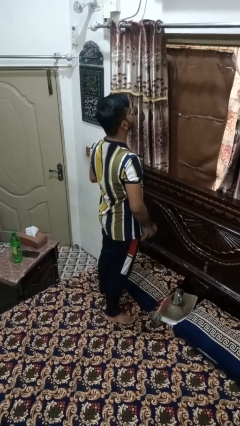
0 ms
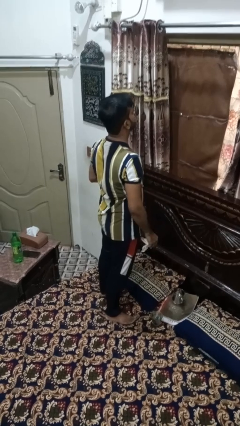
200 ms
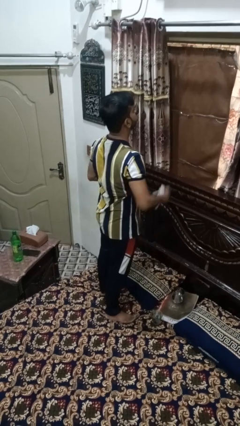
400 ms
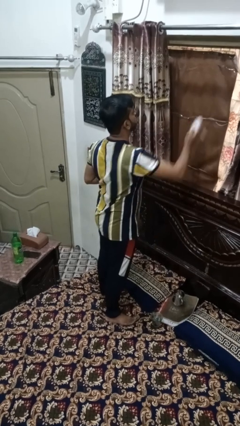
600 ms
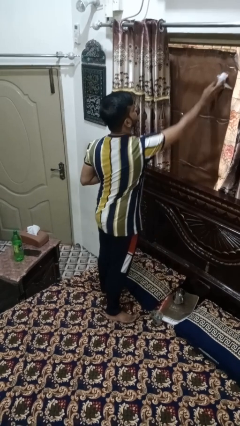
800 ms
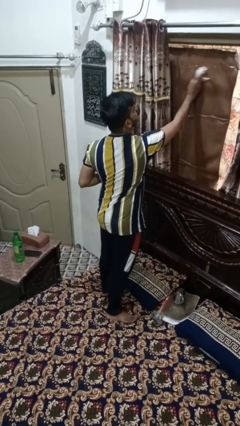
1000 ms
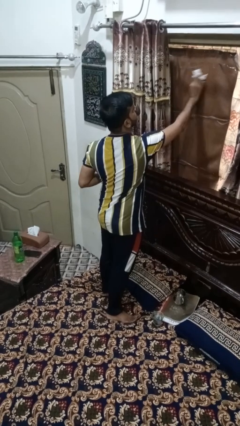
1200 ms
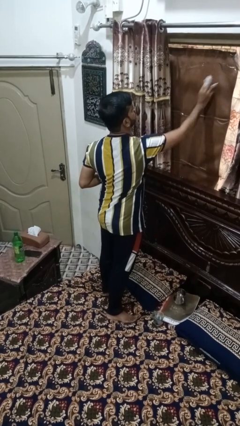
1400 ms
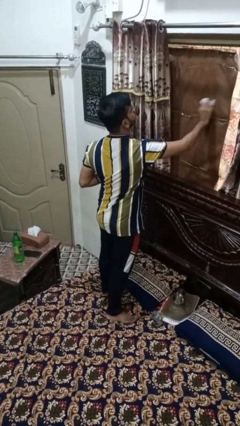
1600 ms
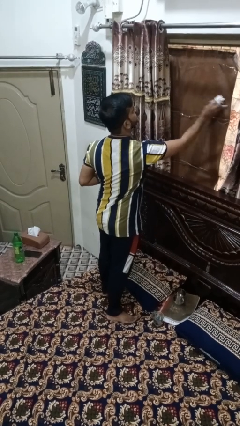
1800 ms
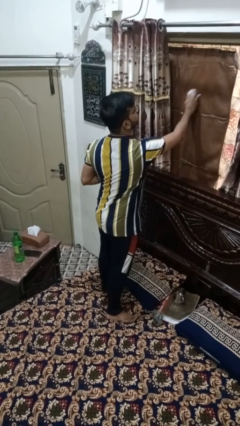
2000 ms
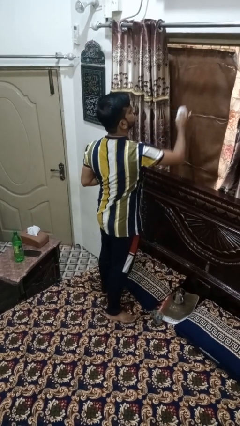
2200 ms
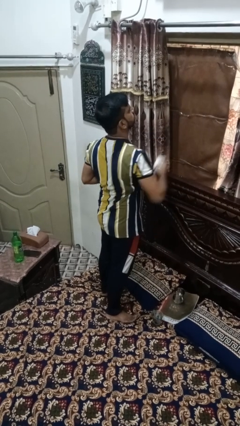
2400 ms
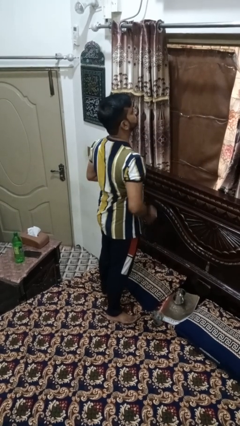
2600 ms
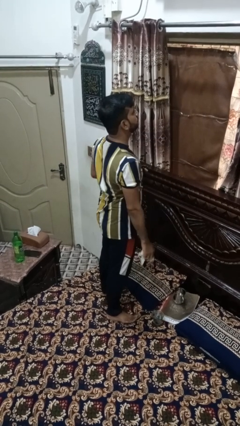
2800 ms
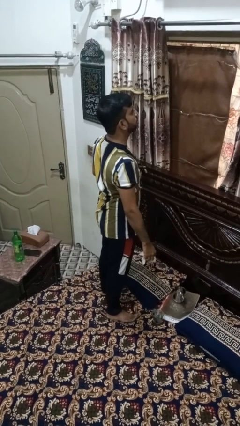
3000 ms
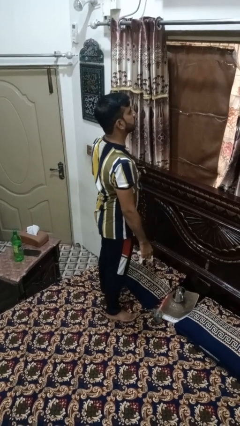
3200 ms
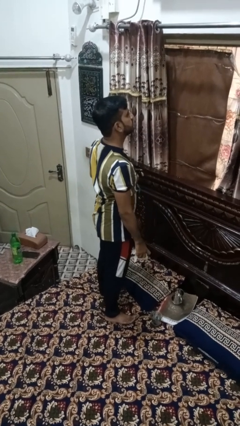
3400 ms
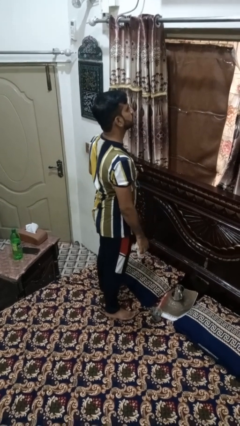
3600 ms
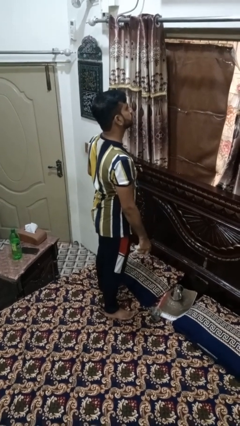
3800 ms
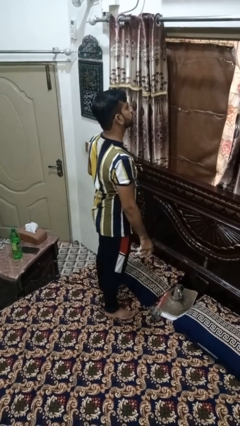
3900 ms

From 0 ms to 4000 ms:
person washes window

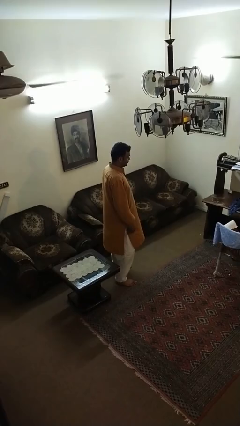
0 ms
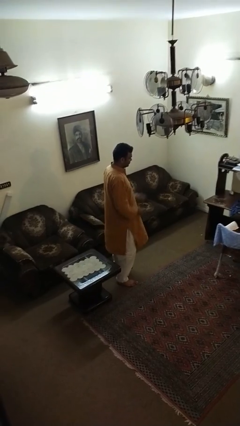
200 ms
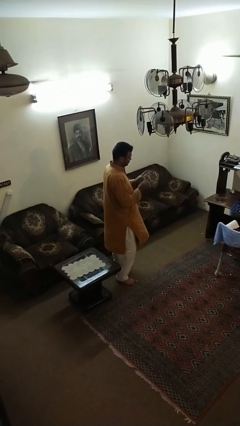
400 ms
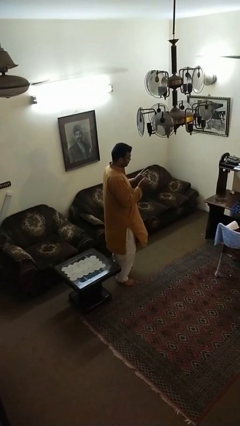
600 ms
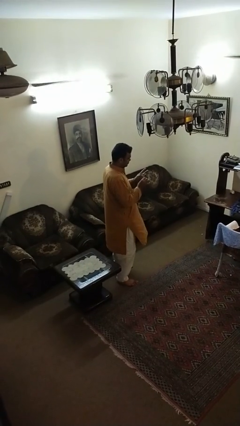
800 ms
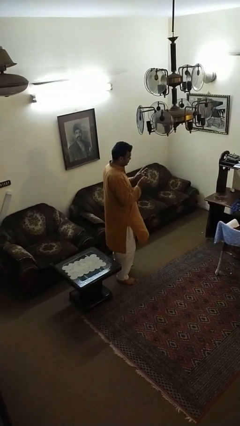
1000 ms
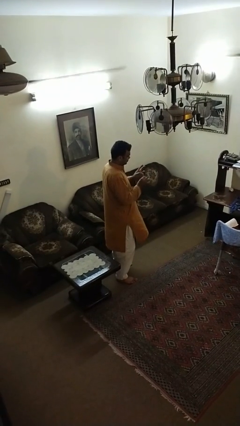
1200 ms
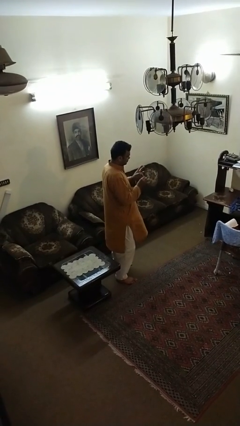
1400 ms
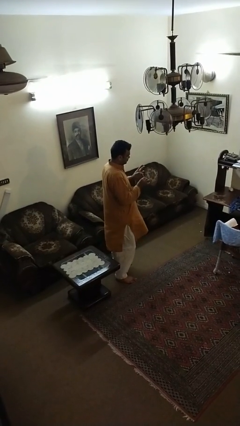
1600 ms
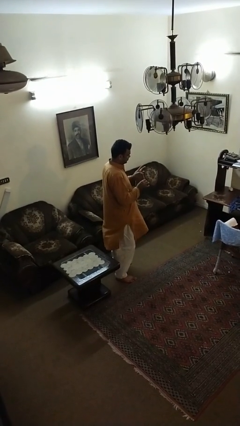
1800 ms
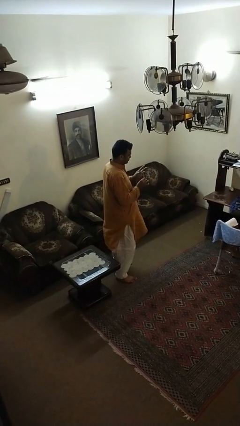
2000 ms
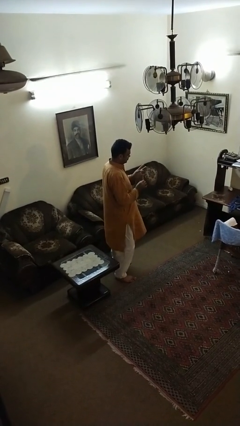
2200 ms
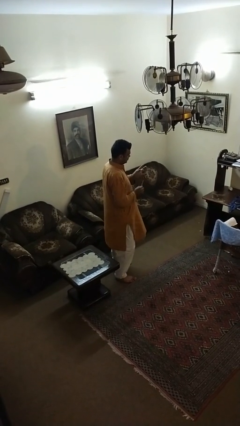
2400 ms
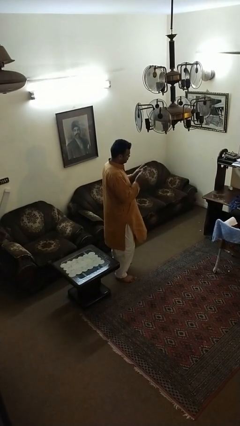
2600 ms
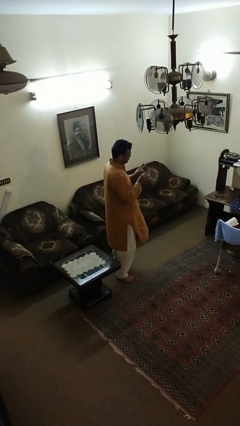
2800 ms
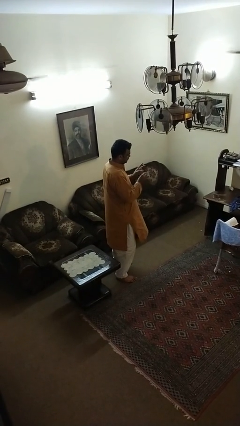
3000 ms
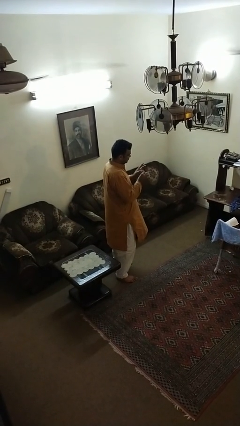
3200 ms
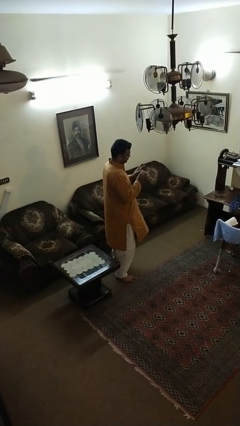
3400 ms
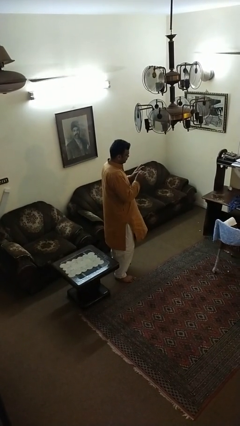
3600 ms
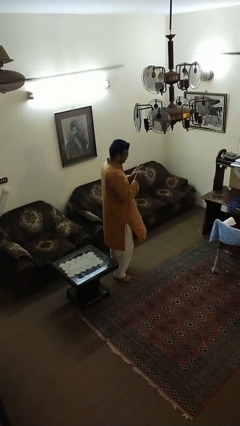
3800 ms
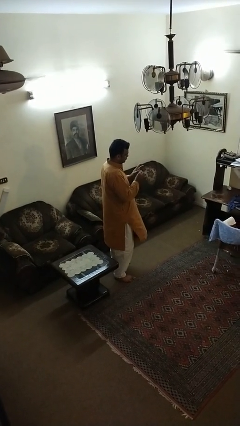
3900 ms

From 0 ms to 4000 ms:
person files fingernails

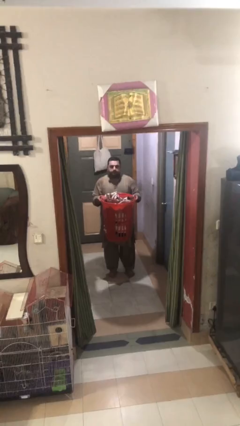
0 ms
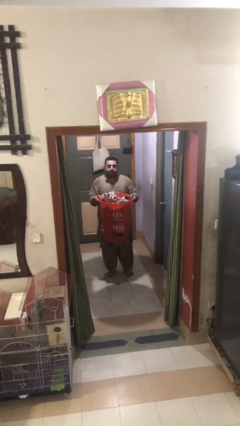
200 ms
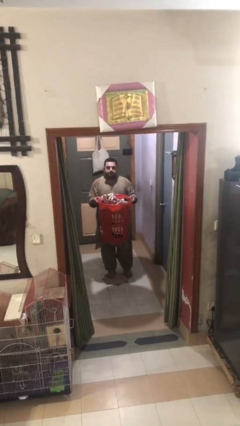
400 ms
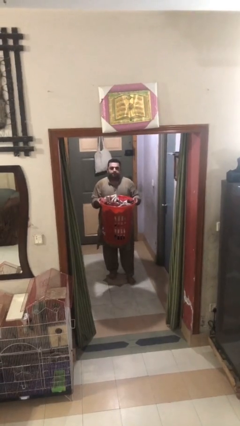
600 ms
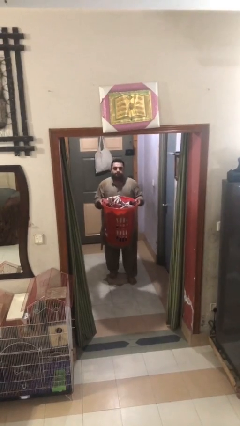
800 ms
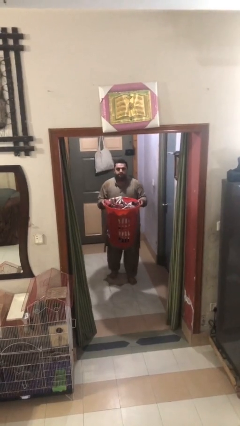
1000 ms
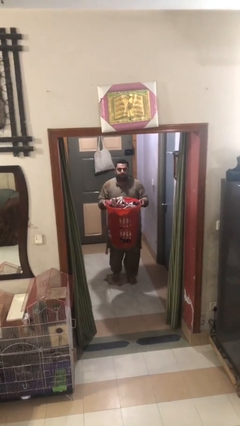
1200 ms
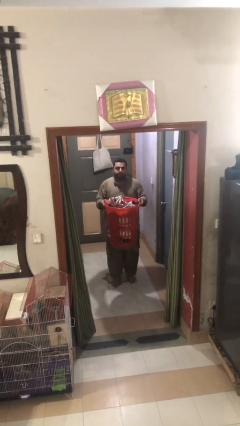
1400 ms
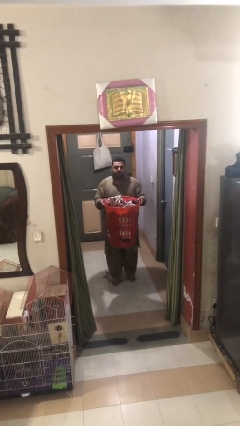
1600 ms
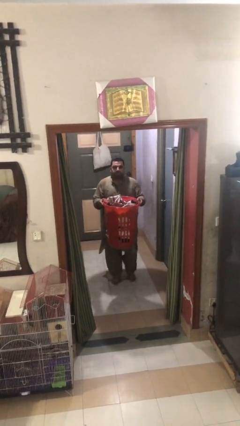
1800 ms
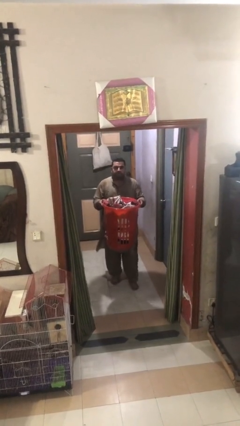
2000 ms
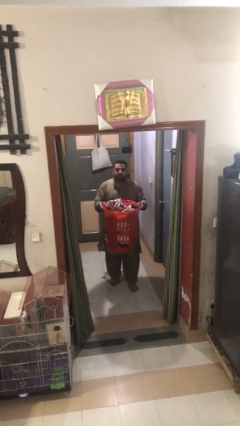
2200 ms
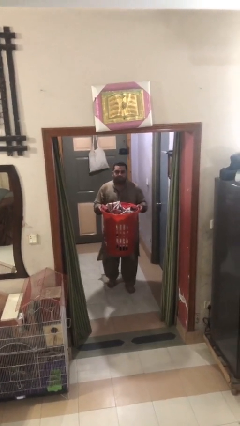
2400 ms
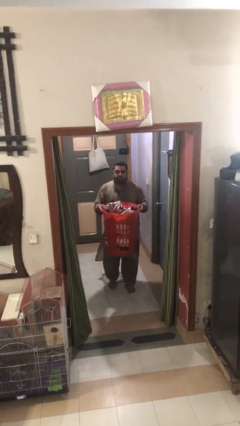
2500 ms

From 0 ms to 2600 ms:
person carries laundry basket

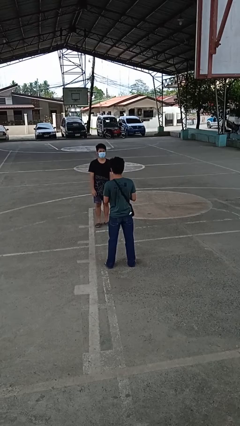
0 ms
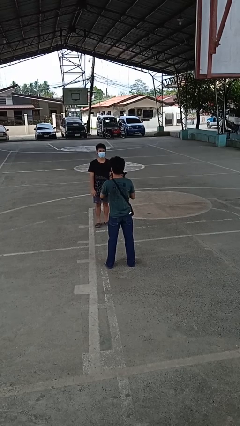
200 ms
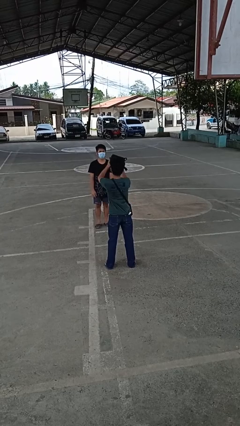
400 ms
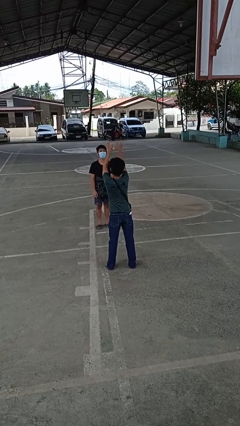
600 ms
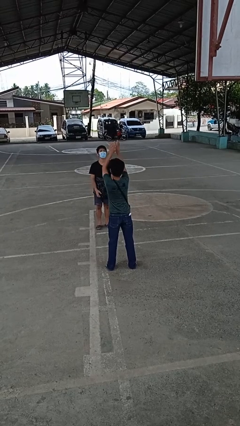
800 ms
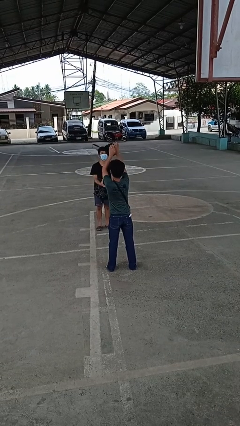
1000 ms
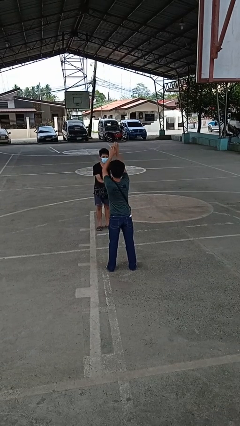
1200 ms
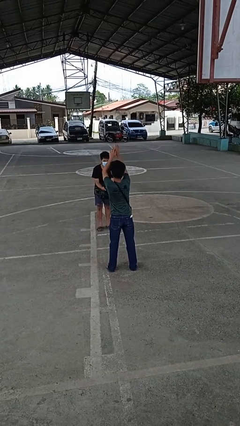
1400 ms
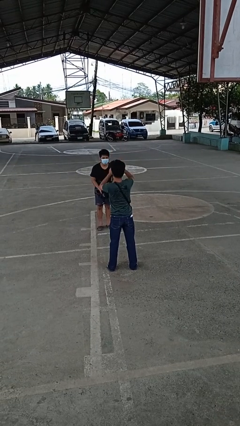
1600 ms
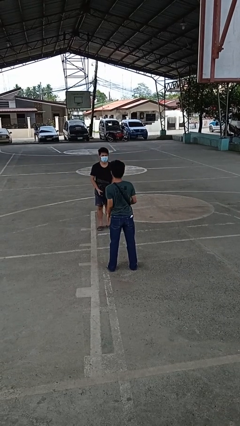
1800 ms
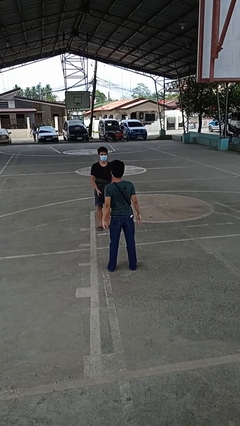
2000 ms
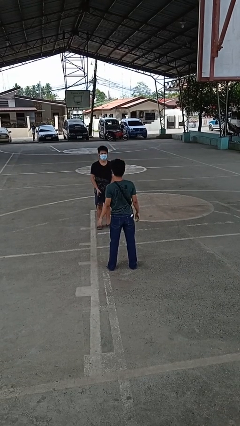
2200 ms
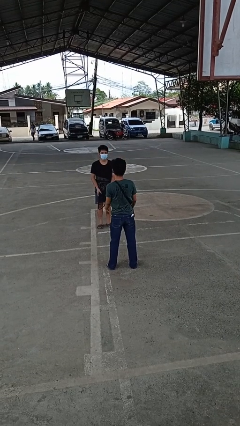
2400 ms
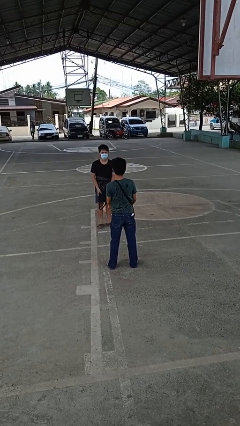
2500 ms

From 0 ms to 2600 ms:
person throws object to person

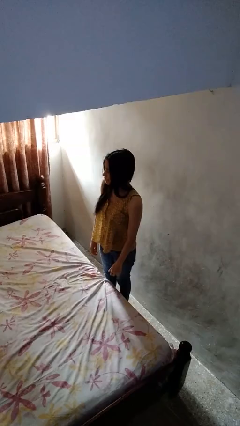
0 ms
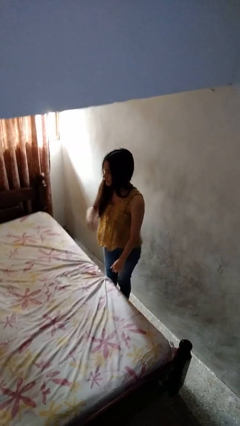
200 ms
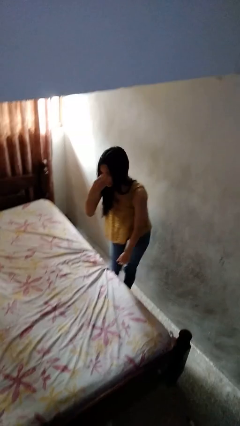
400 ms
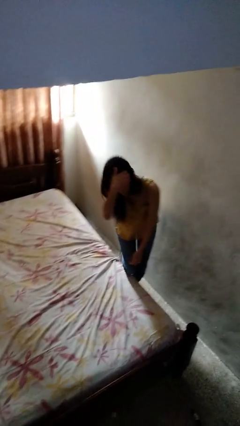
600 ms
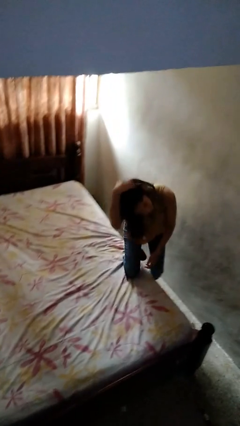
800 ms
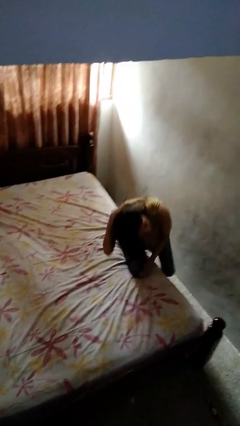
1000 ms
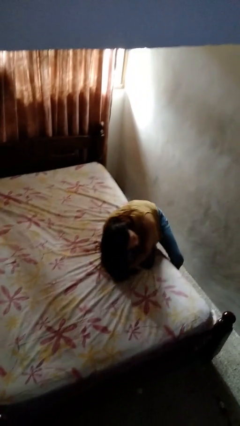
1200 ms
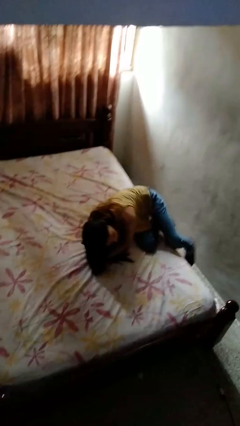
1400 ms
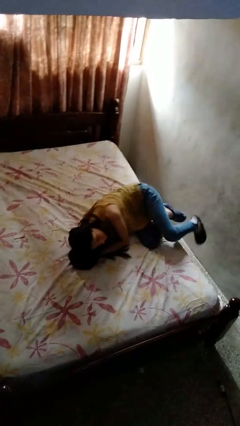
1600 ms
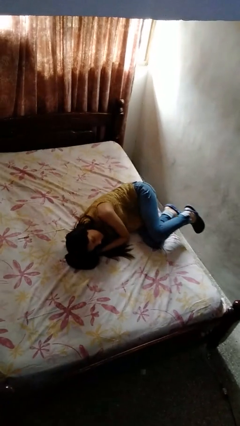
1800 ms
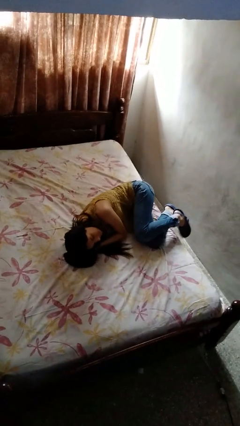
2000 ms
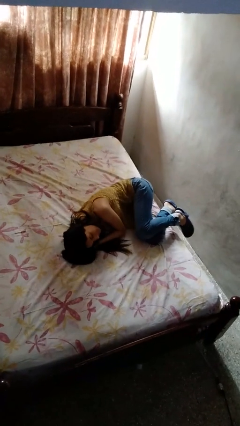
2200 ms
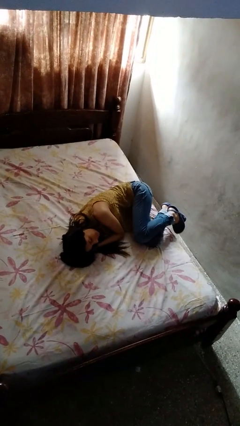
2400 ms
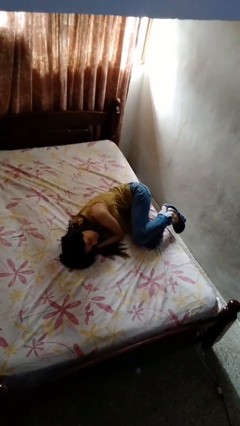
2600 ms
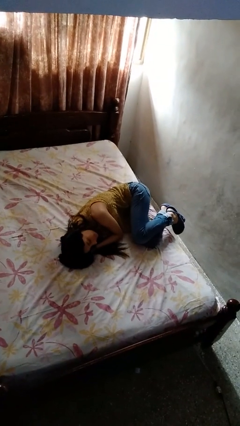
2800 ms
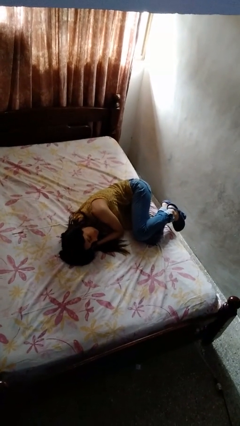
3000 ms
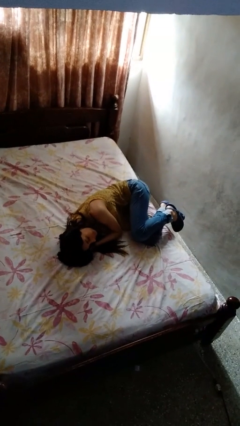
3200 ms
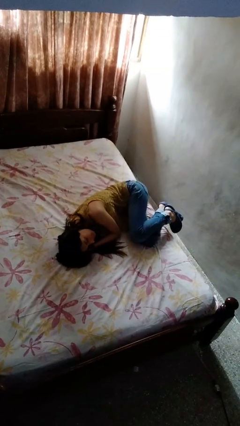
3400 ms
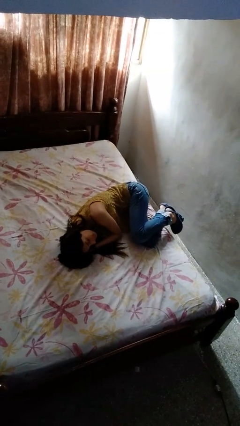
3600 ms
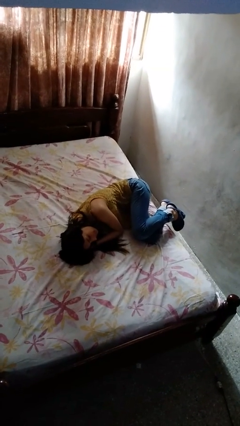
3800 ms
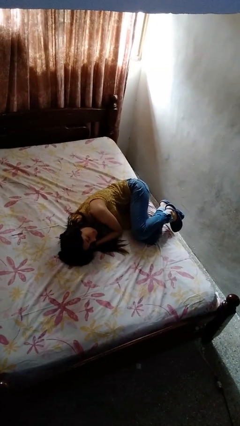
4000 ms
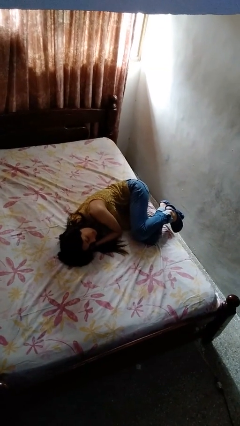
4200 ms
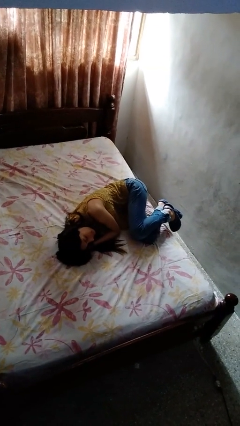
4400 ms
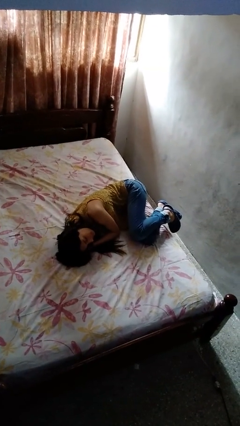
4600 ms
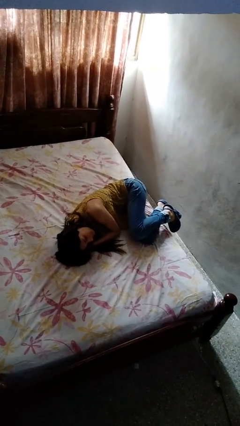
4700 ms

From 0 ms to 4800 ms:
person lies down on bed
